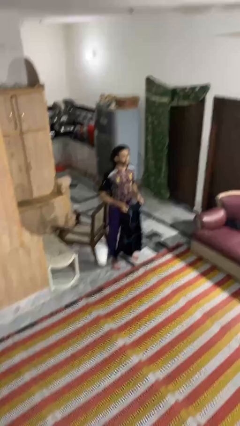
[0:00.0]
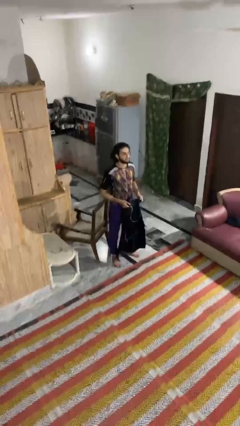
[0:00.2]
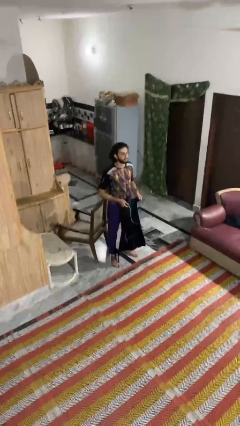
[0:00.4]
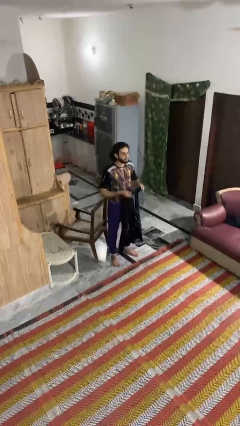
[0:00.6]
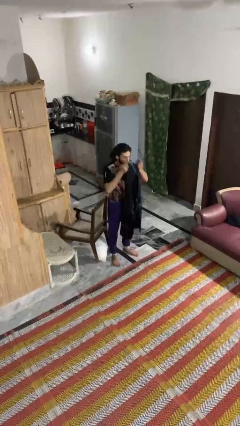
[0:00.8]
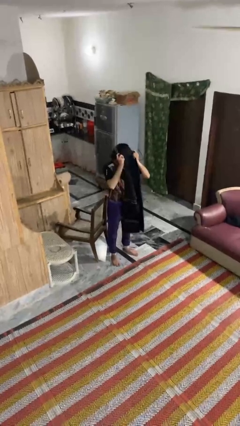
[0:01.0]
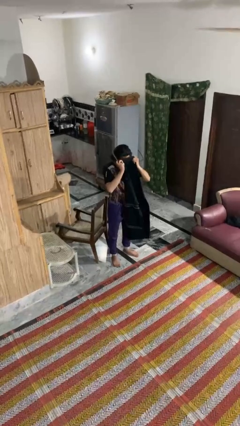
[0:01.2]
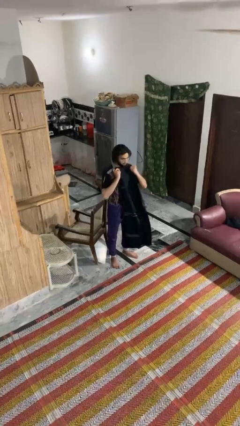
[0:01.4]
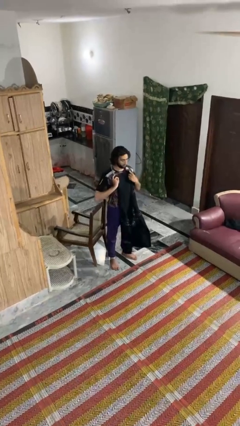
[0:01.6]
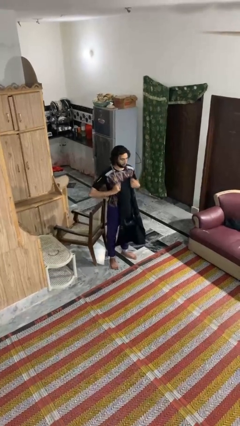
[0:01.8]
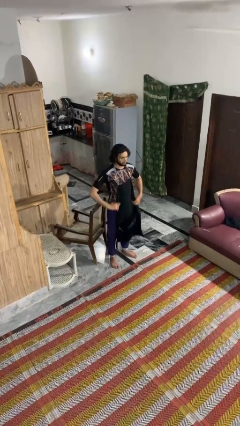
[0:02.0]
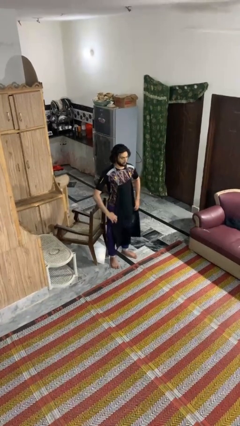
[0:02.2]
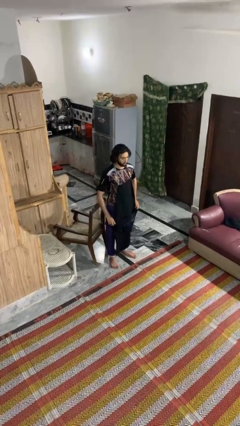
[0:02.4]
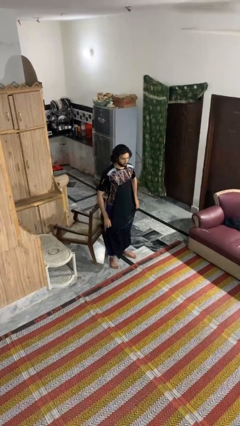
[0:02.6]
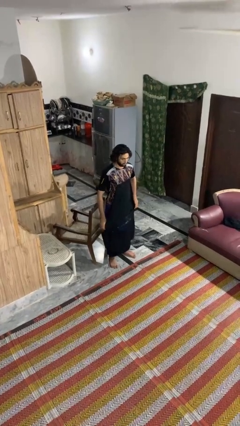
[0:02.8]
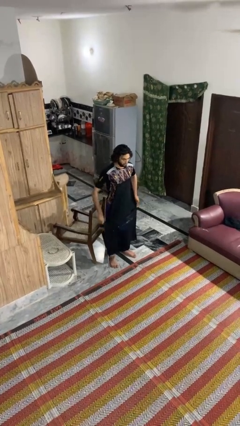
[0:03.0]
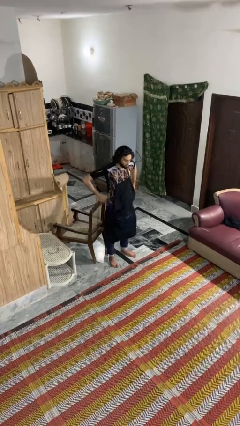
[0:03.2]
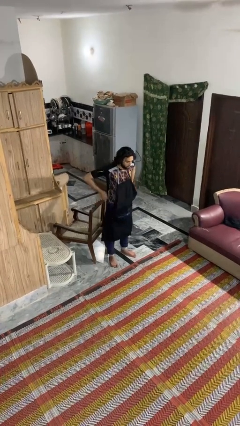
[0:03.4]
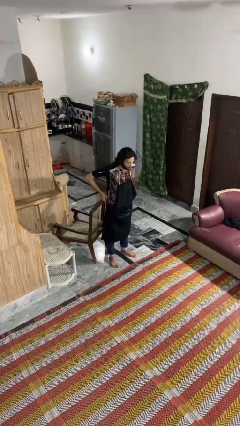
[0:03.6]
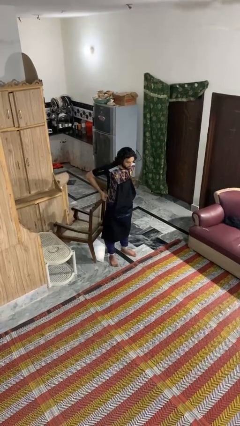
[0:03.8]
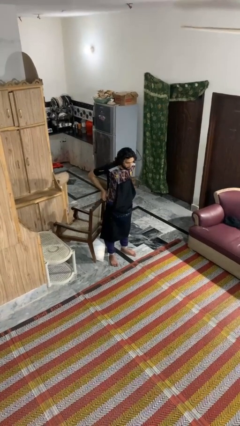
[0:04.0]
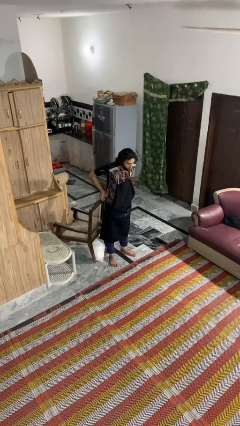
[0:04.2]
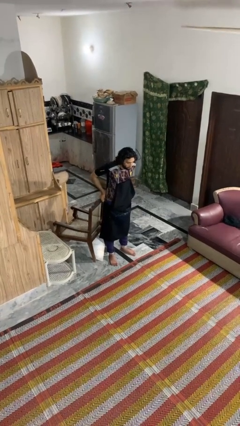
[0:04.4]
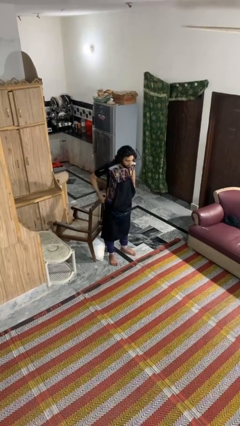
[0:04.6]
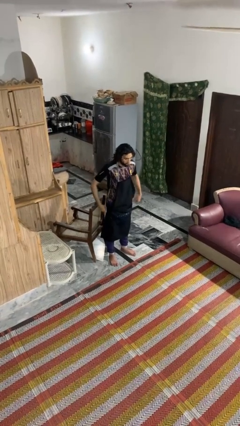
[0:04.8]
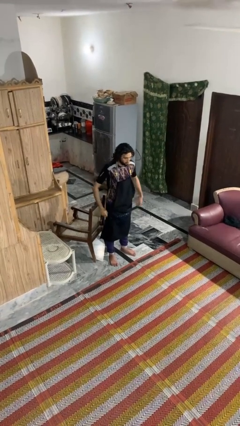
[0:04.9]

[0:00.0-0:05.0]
person puts on apron

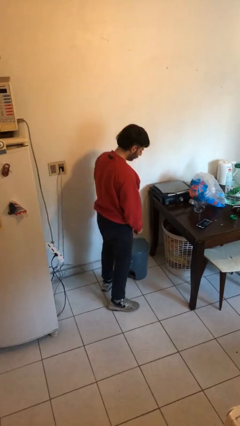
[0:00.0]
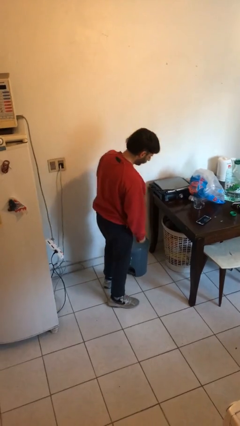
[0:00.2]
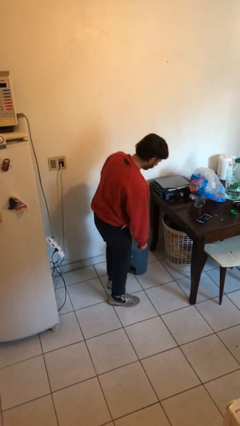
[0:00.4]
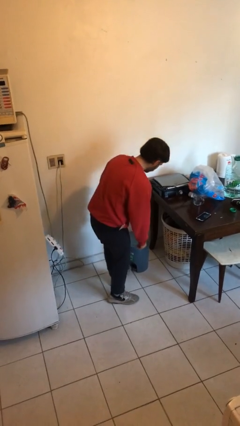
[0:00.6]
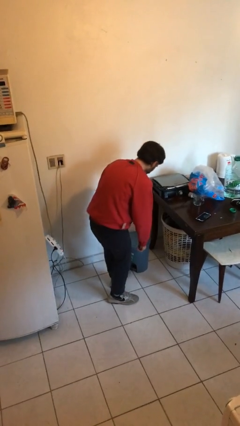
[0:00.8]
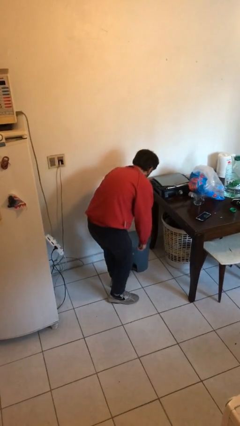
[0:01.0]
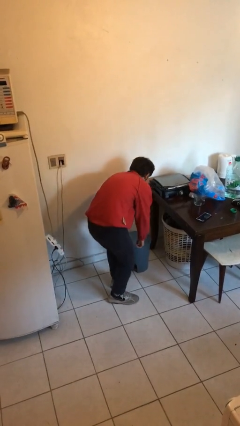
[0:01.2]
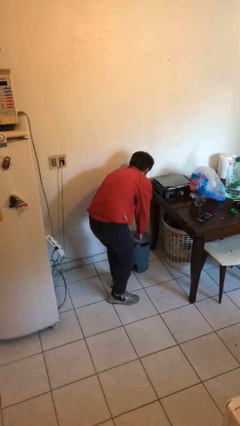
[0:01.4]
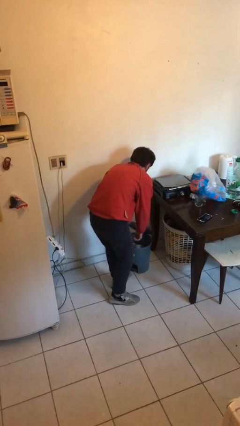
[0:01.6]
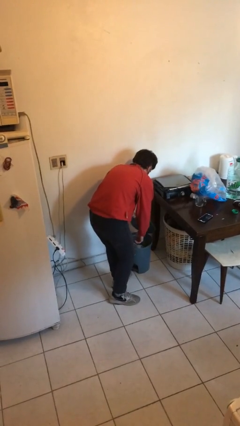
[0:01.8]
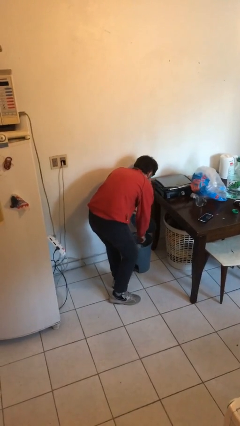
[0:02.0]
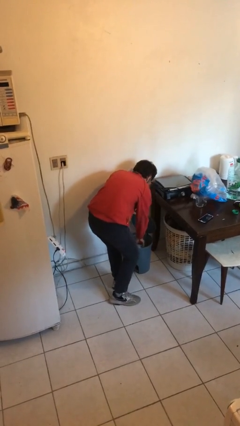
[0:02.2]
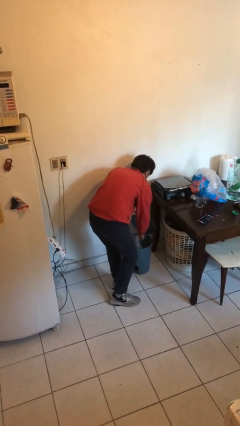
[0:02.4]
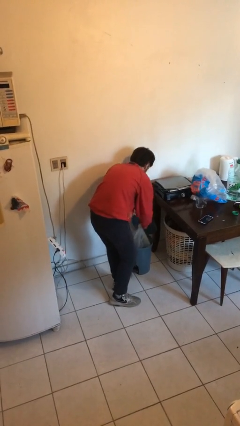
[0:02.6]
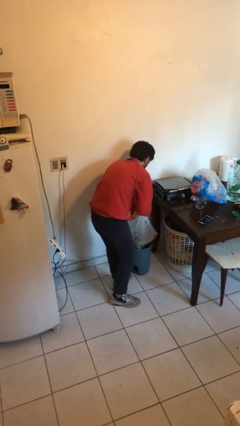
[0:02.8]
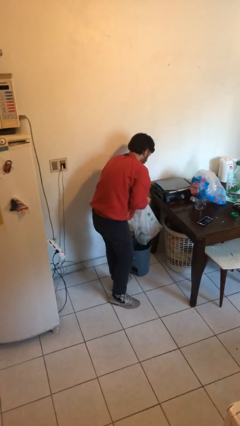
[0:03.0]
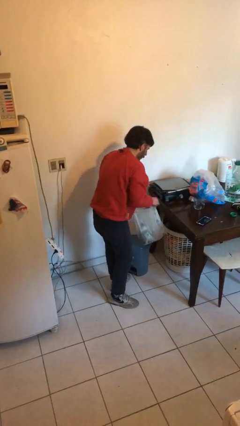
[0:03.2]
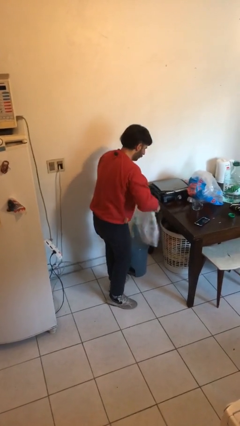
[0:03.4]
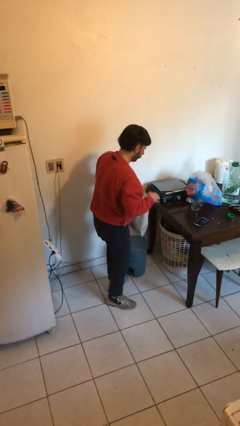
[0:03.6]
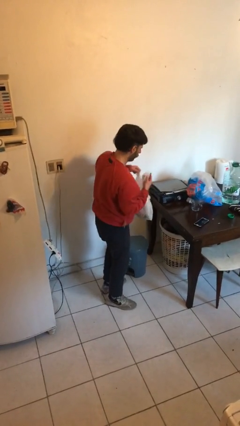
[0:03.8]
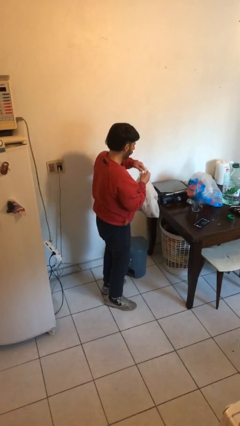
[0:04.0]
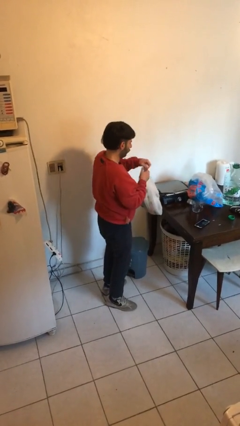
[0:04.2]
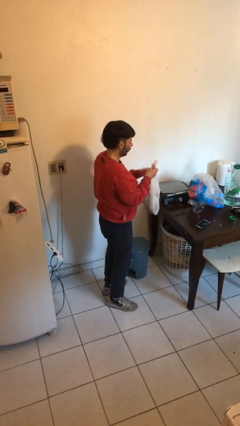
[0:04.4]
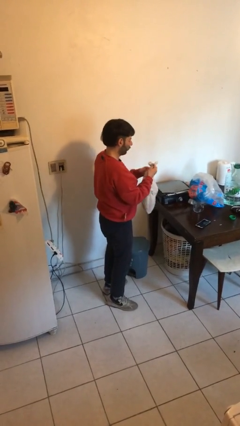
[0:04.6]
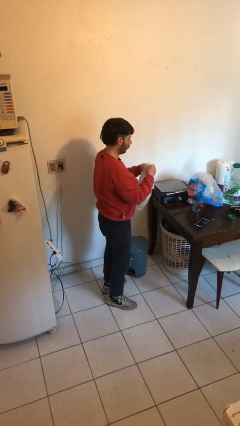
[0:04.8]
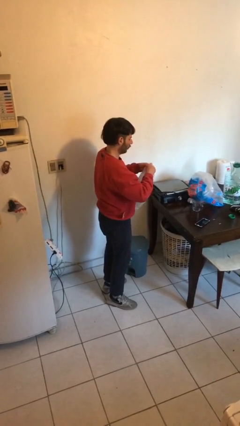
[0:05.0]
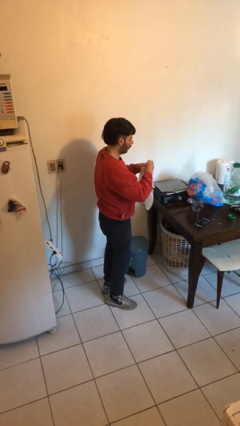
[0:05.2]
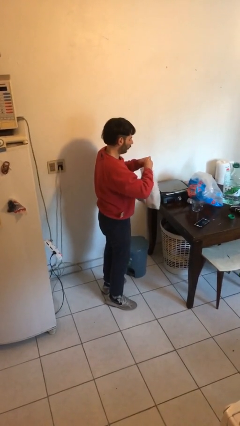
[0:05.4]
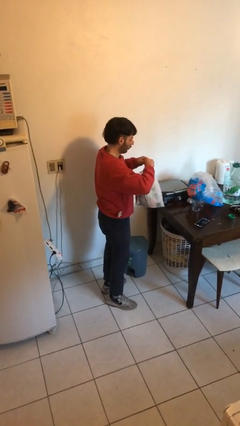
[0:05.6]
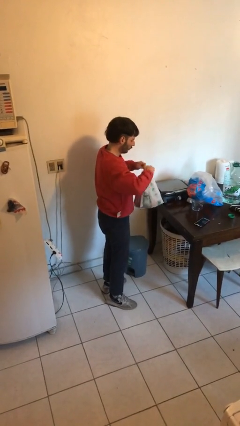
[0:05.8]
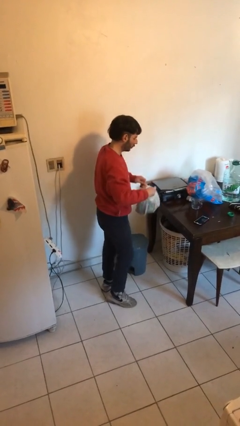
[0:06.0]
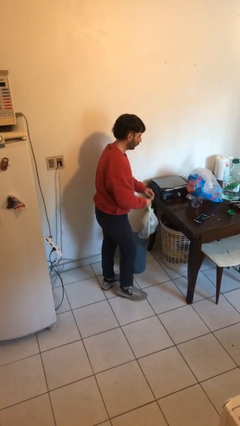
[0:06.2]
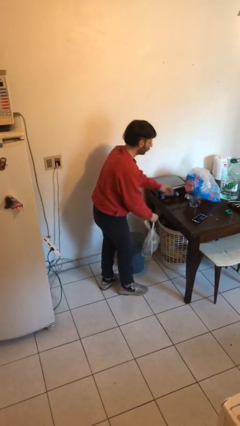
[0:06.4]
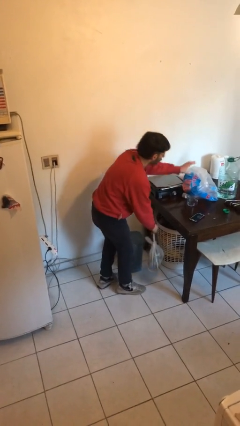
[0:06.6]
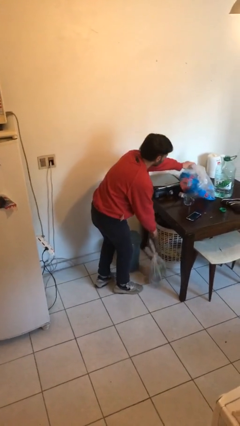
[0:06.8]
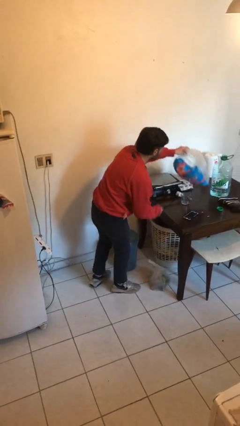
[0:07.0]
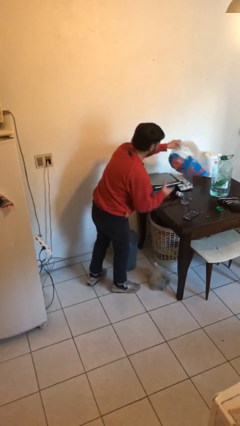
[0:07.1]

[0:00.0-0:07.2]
person removes trashbag from trashcan

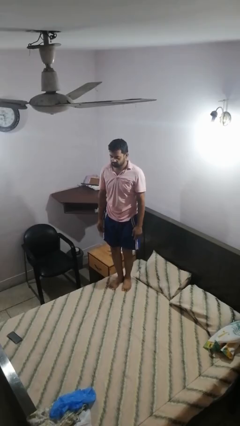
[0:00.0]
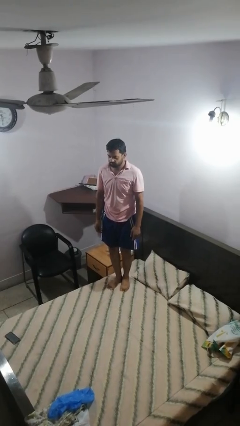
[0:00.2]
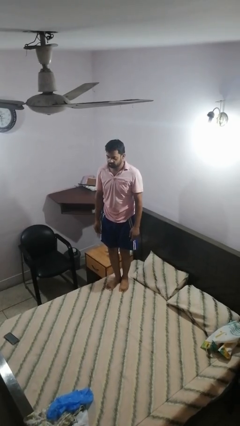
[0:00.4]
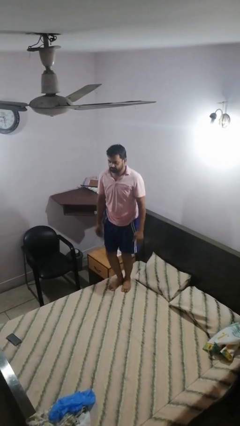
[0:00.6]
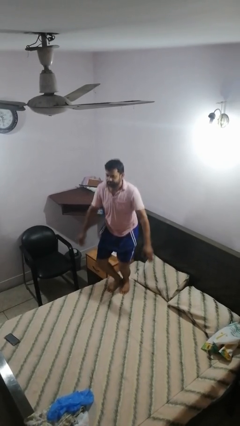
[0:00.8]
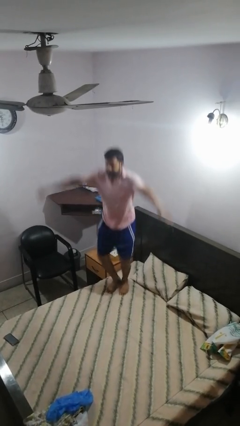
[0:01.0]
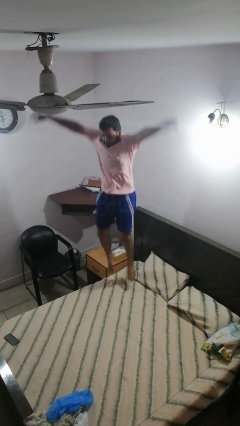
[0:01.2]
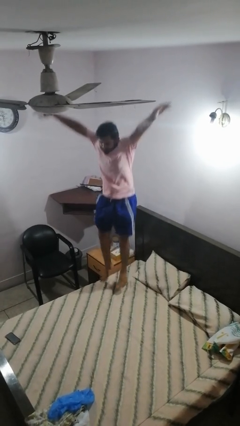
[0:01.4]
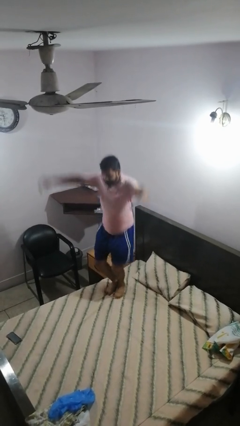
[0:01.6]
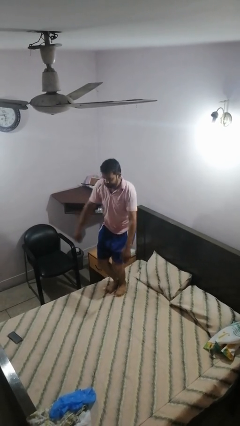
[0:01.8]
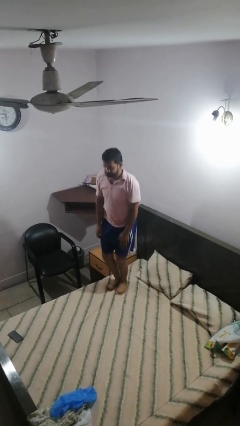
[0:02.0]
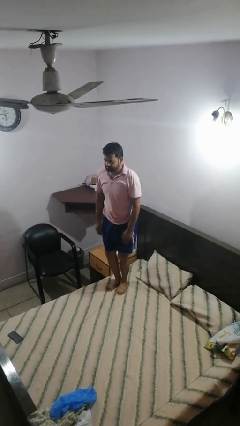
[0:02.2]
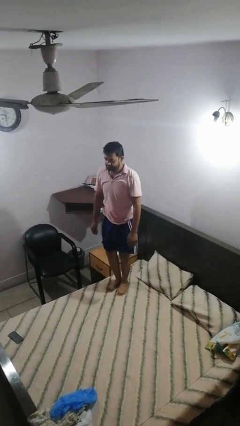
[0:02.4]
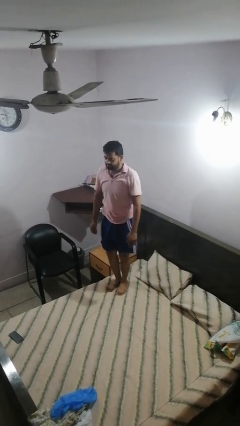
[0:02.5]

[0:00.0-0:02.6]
person jumps on bed

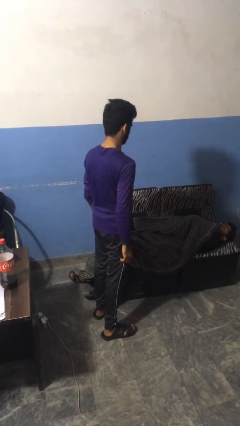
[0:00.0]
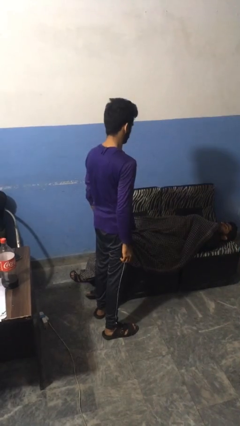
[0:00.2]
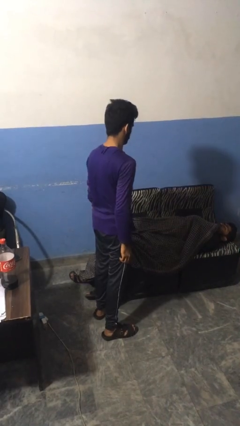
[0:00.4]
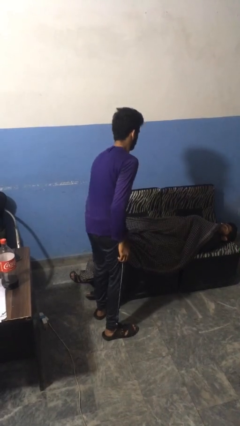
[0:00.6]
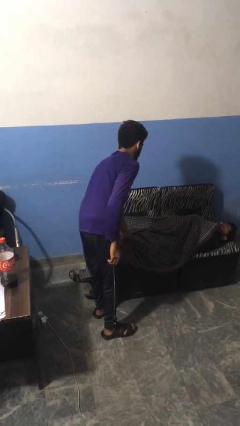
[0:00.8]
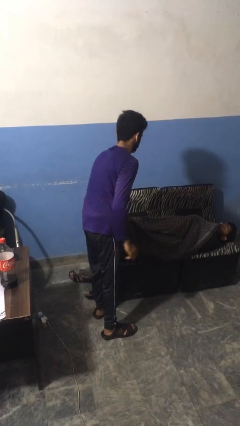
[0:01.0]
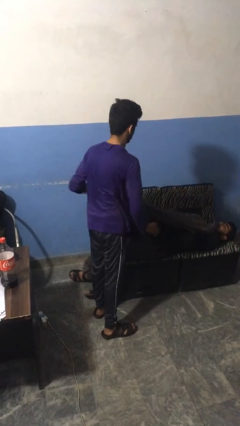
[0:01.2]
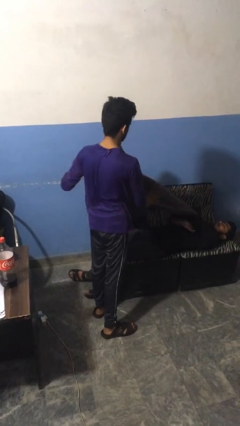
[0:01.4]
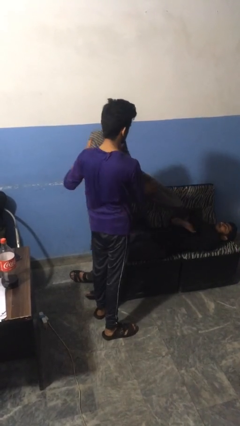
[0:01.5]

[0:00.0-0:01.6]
person uncovers friend with blanket

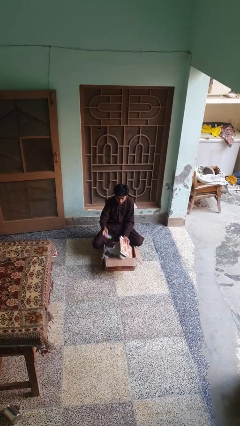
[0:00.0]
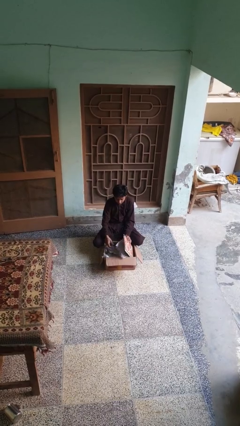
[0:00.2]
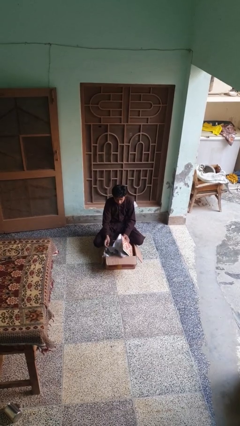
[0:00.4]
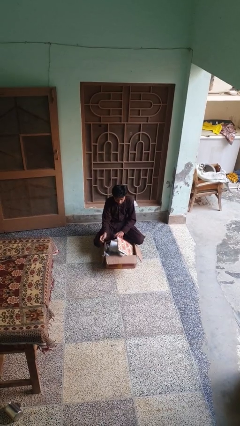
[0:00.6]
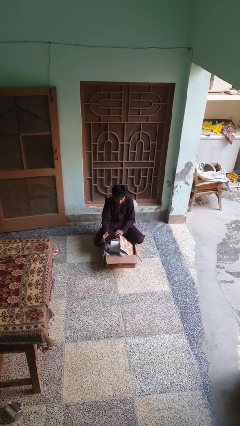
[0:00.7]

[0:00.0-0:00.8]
person puts object into box

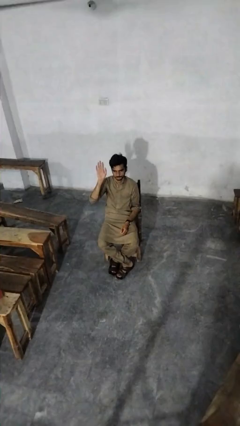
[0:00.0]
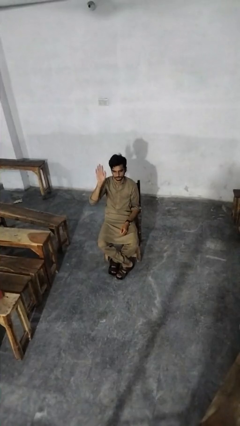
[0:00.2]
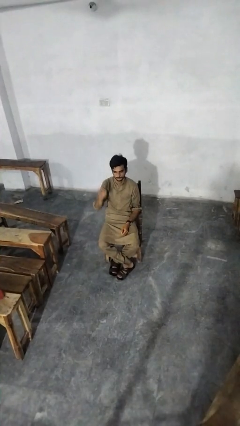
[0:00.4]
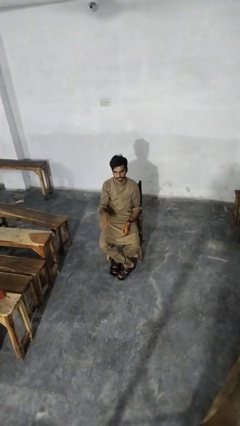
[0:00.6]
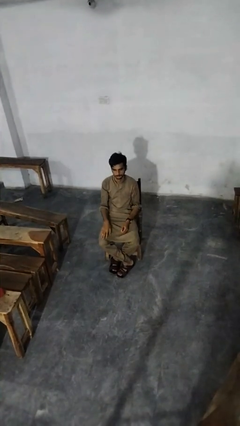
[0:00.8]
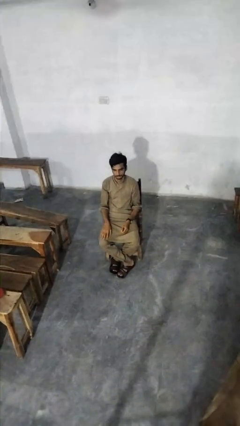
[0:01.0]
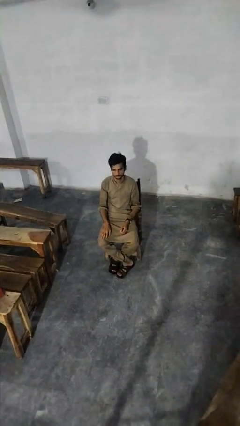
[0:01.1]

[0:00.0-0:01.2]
person gestures lower hand
